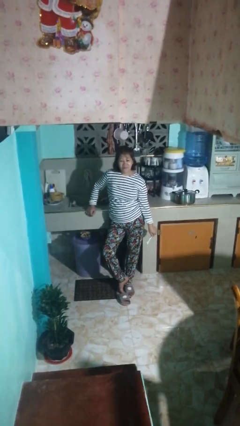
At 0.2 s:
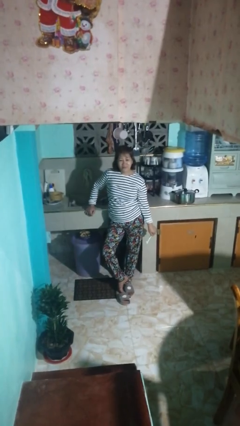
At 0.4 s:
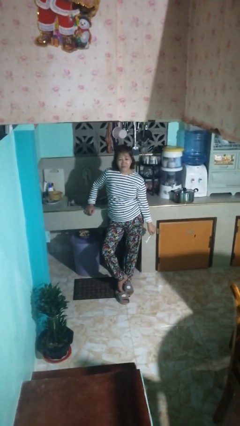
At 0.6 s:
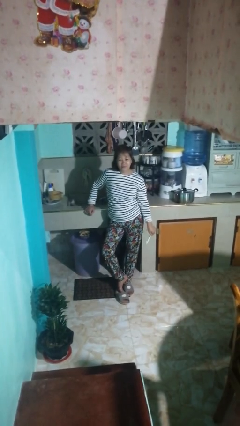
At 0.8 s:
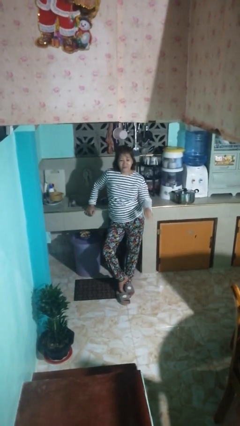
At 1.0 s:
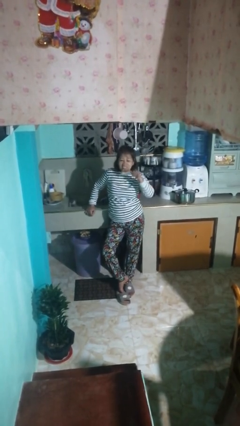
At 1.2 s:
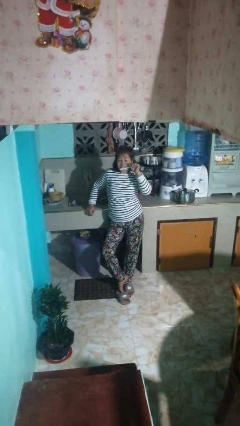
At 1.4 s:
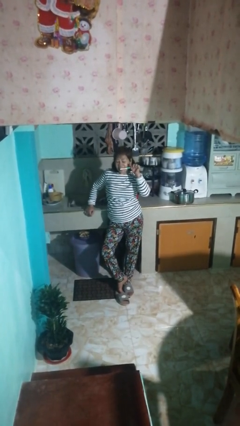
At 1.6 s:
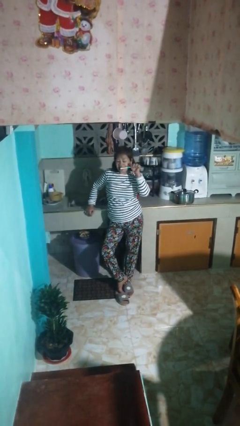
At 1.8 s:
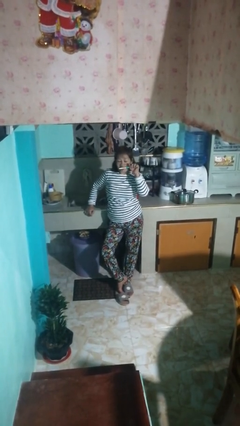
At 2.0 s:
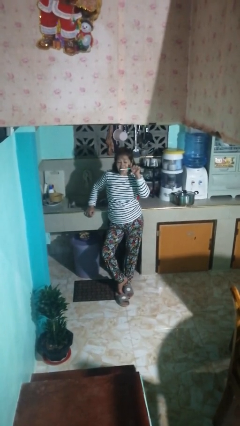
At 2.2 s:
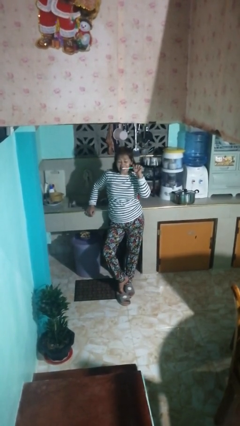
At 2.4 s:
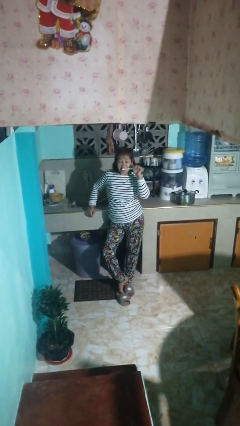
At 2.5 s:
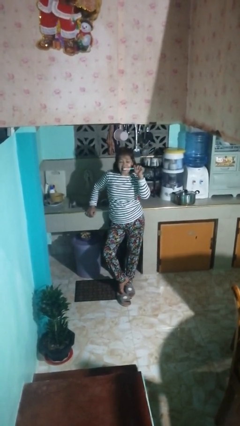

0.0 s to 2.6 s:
person brushes teeth

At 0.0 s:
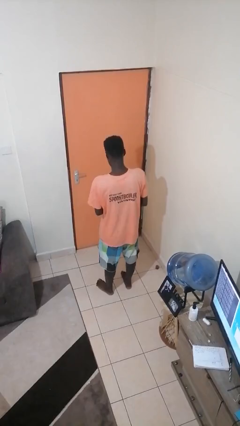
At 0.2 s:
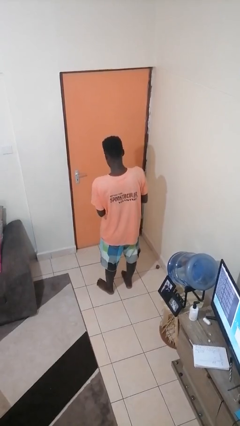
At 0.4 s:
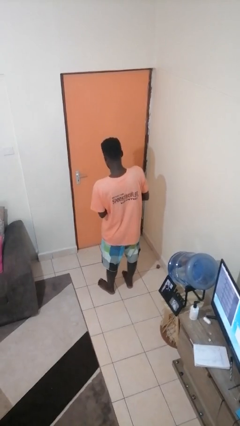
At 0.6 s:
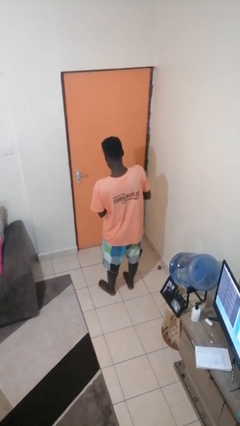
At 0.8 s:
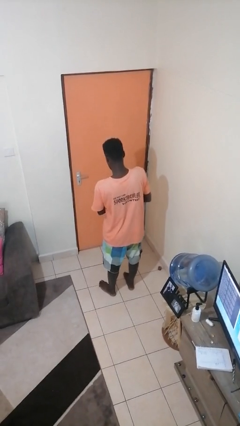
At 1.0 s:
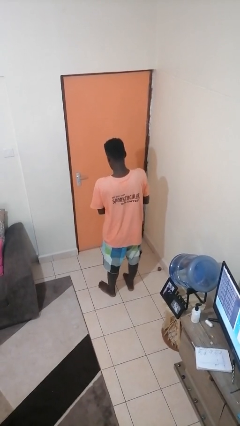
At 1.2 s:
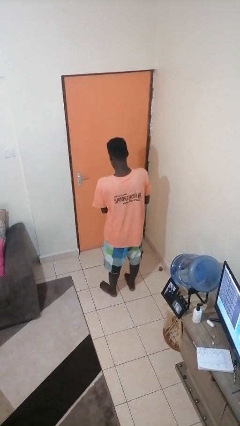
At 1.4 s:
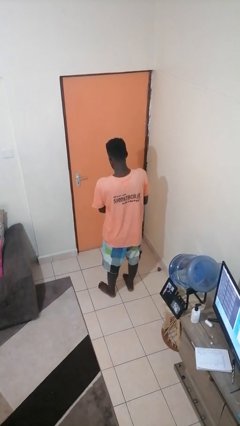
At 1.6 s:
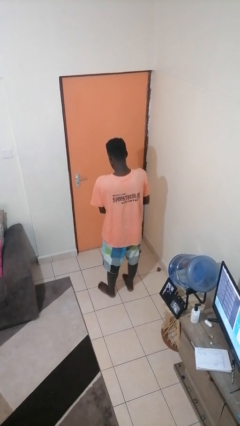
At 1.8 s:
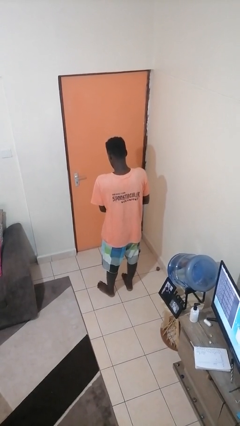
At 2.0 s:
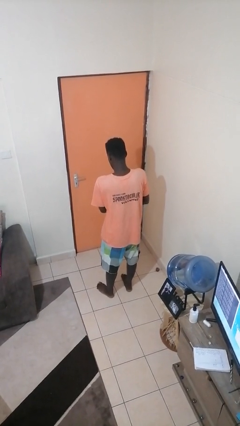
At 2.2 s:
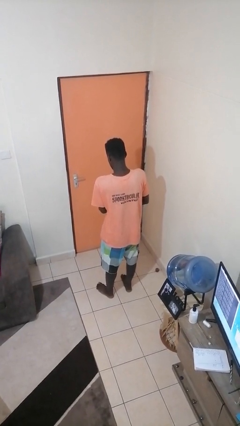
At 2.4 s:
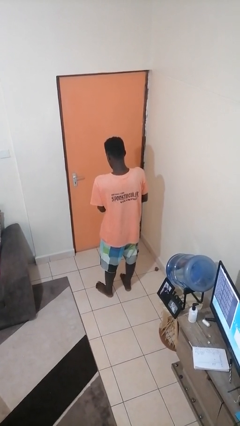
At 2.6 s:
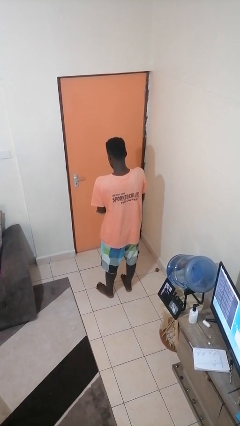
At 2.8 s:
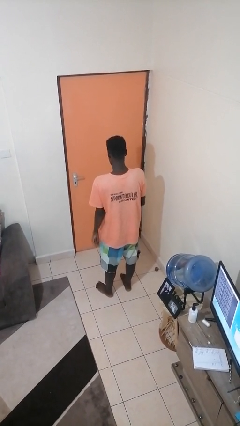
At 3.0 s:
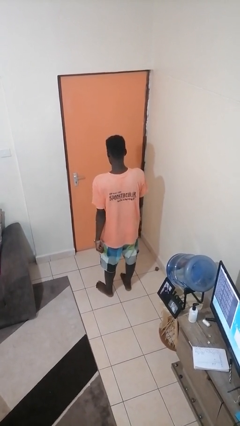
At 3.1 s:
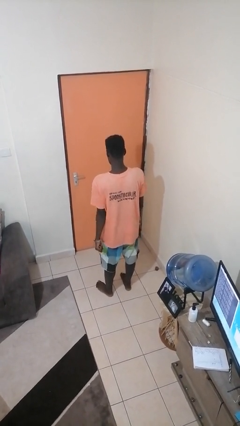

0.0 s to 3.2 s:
person puts on wristwatch

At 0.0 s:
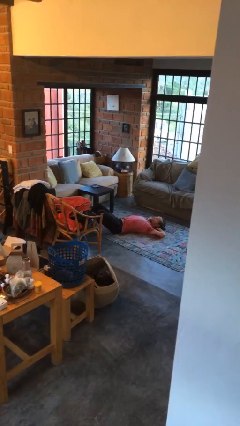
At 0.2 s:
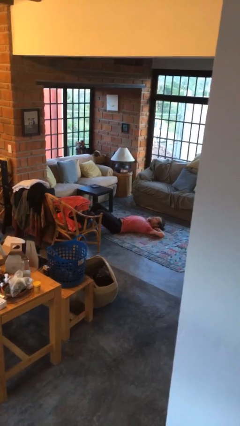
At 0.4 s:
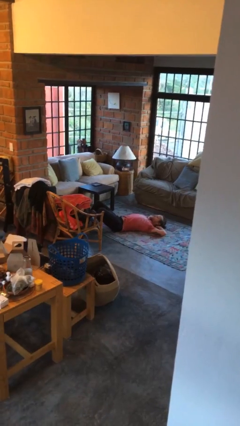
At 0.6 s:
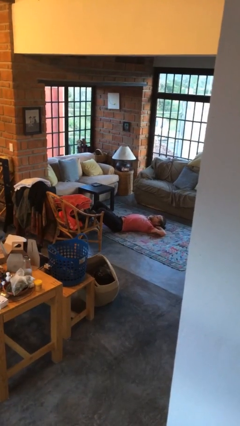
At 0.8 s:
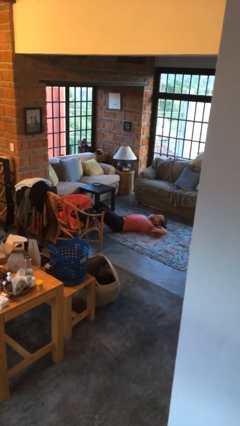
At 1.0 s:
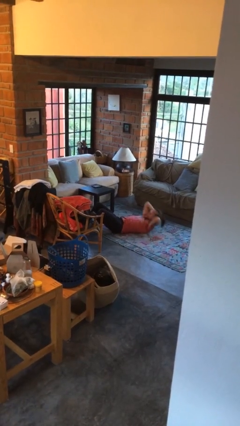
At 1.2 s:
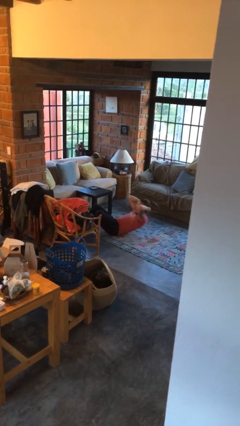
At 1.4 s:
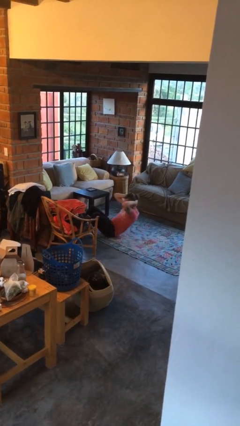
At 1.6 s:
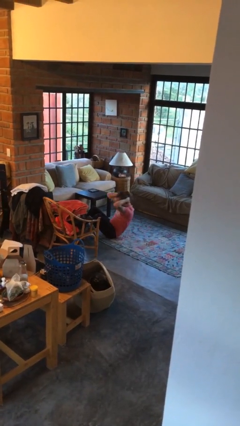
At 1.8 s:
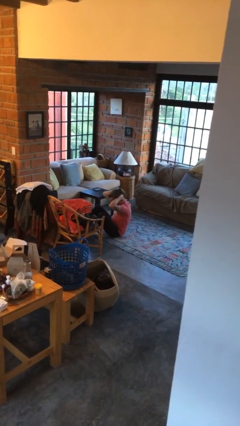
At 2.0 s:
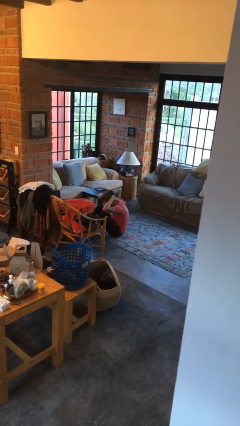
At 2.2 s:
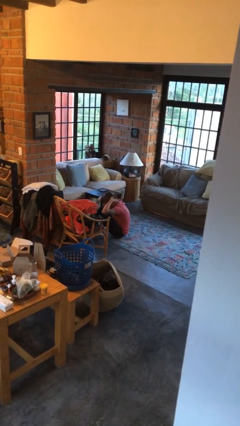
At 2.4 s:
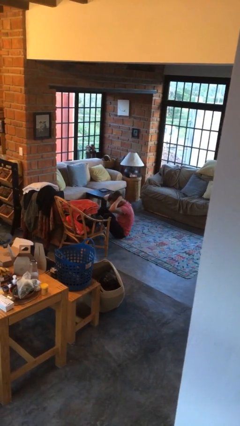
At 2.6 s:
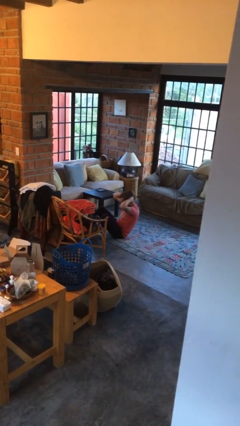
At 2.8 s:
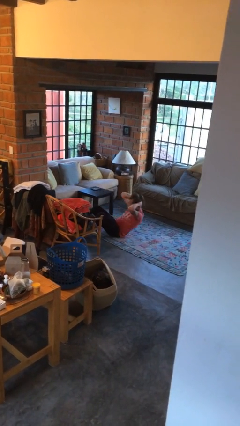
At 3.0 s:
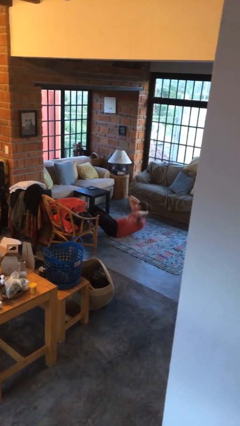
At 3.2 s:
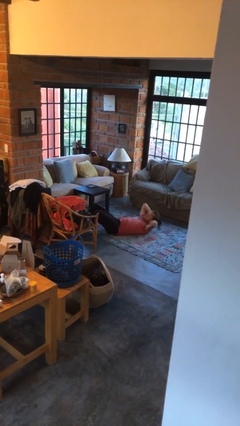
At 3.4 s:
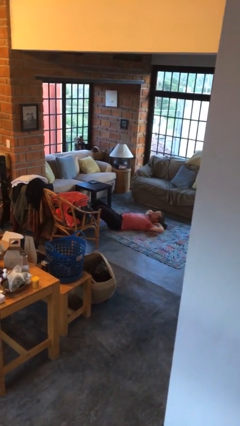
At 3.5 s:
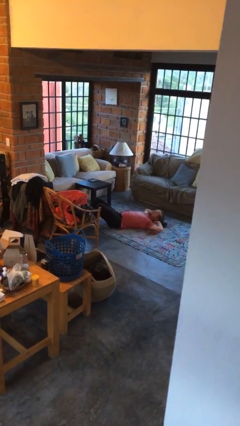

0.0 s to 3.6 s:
person exercises with situp

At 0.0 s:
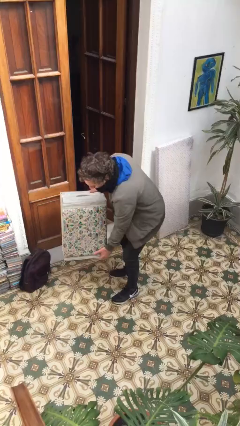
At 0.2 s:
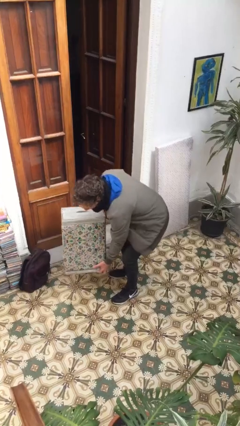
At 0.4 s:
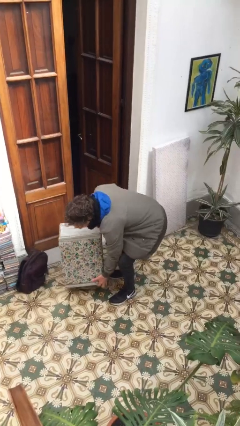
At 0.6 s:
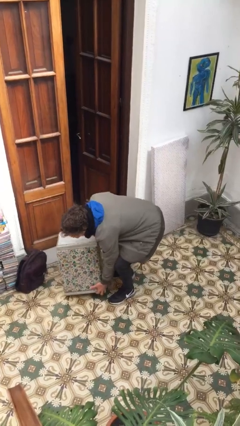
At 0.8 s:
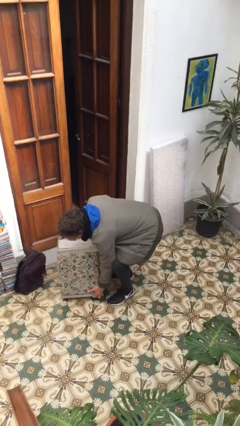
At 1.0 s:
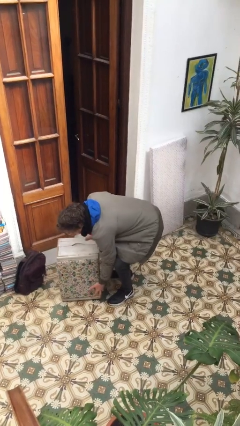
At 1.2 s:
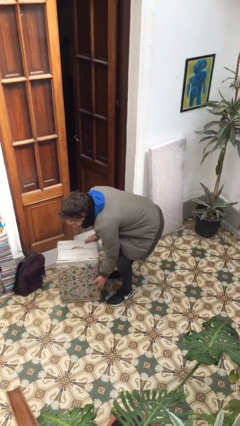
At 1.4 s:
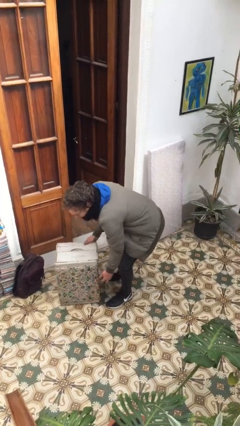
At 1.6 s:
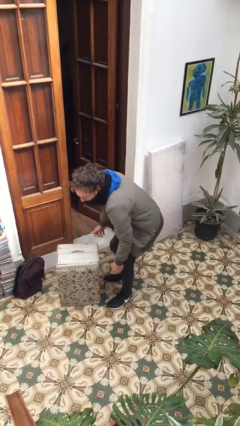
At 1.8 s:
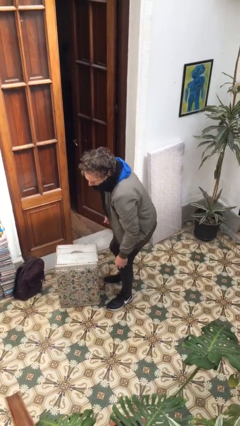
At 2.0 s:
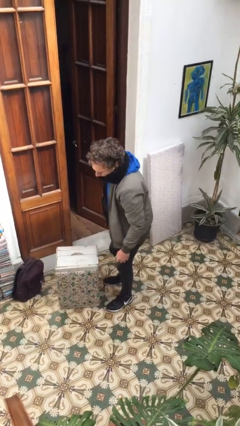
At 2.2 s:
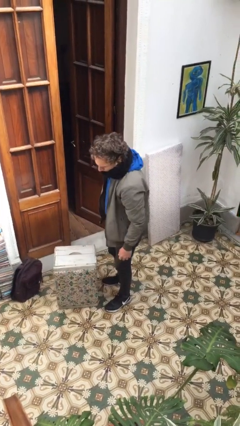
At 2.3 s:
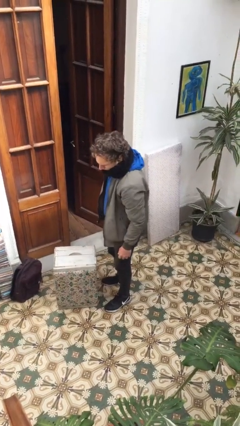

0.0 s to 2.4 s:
person puts down object on floor

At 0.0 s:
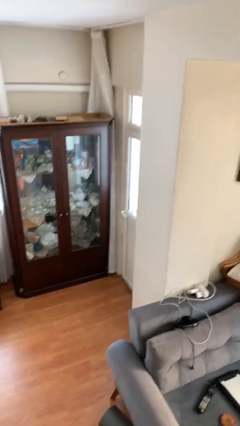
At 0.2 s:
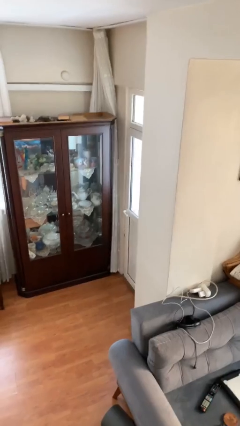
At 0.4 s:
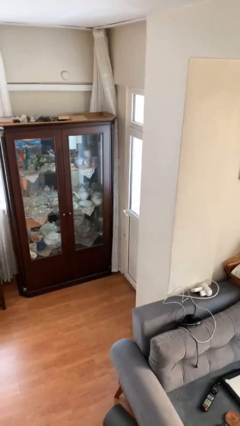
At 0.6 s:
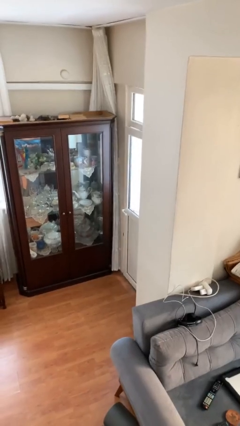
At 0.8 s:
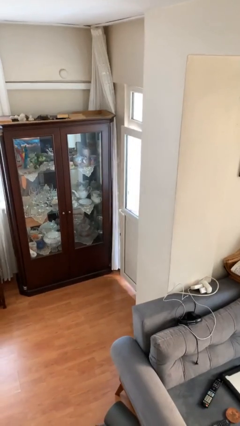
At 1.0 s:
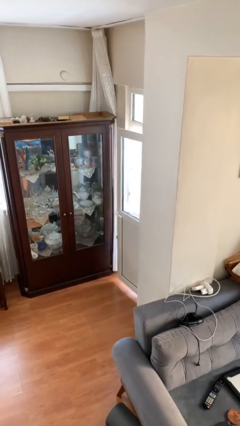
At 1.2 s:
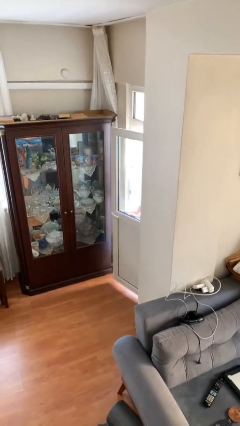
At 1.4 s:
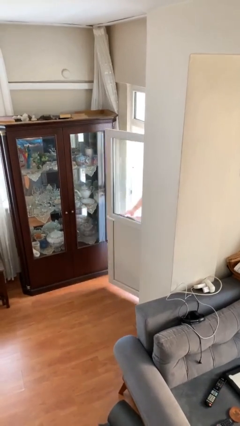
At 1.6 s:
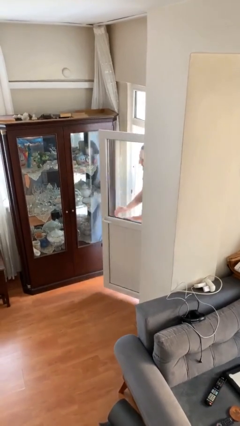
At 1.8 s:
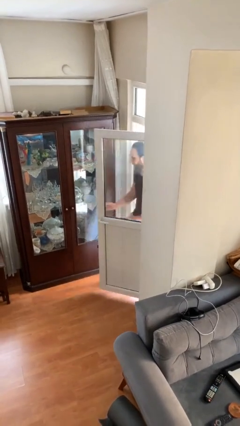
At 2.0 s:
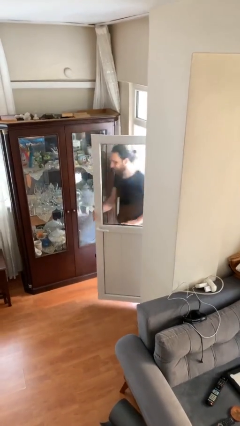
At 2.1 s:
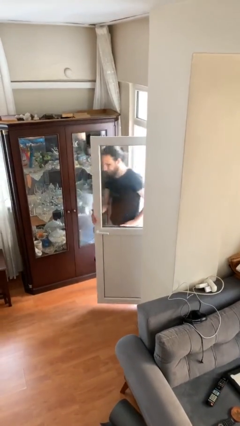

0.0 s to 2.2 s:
person opens facility door

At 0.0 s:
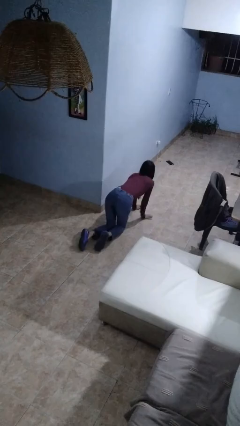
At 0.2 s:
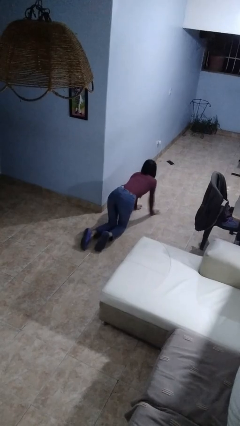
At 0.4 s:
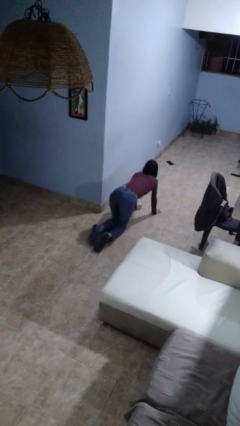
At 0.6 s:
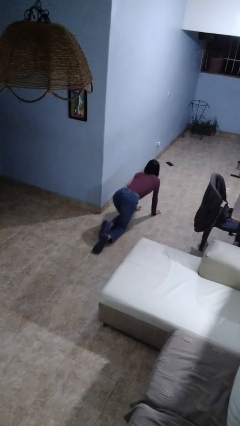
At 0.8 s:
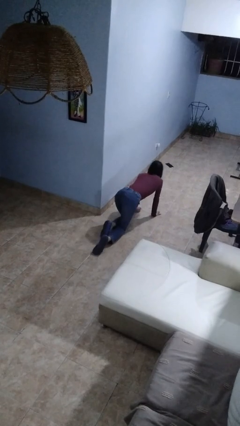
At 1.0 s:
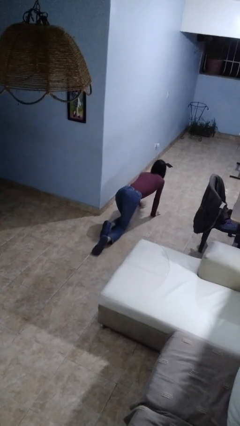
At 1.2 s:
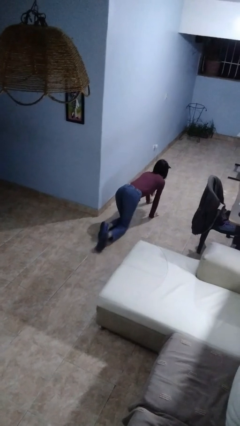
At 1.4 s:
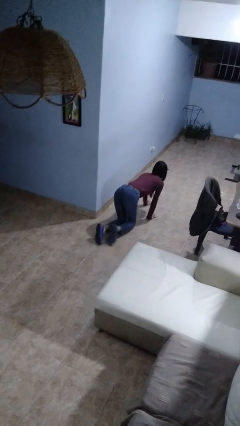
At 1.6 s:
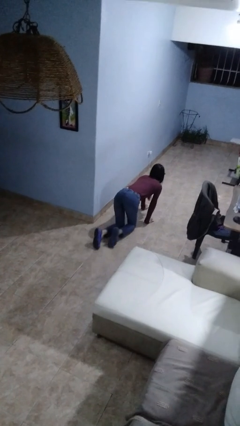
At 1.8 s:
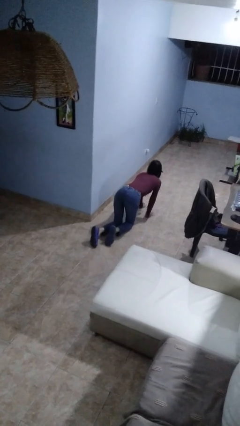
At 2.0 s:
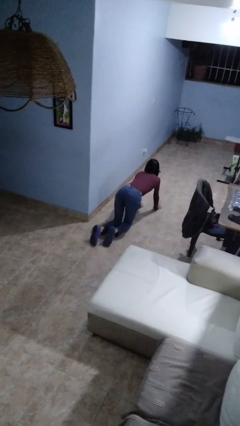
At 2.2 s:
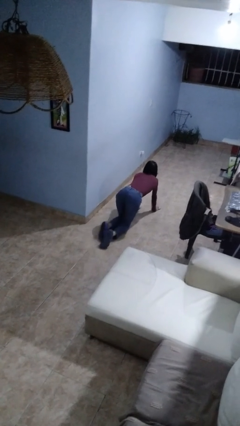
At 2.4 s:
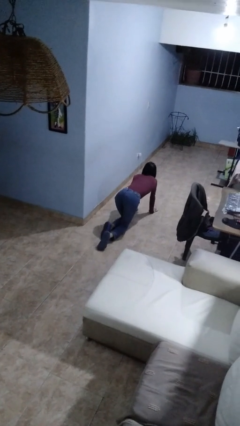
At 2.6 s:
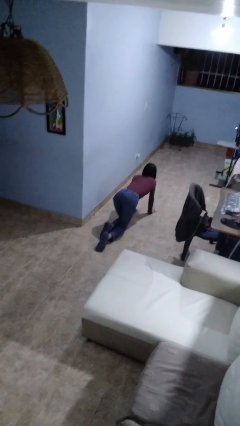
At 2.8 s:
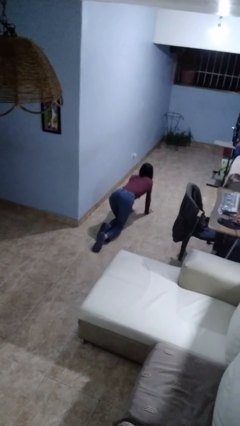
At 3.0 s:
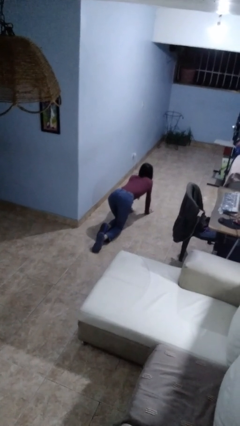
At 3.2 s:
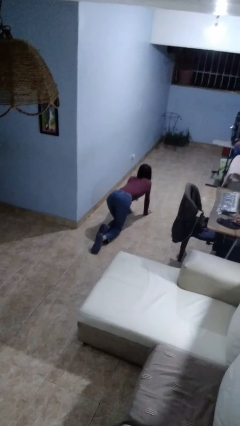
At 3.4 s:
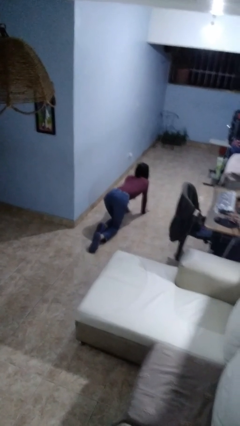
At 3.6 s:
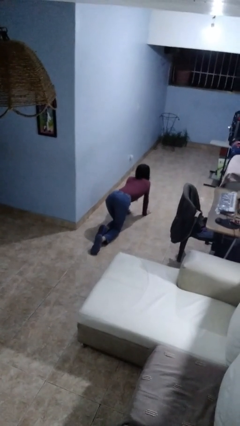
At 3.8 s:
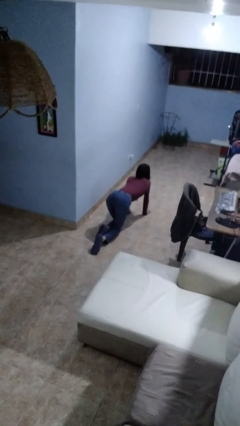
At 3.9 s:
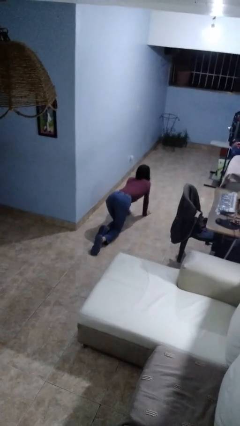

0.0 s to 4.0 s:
person crawls
